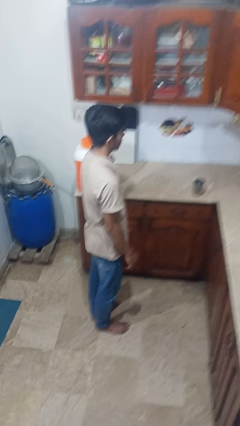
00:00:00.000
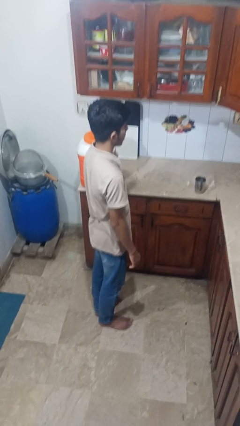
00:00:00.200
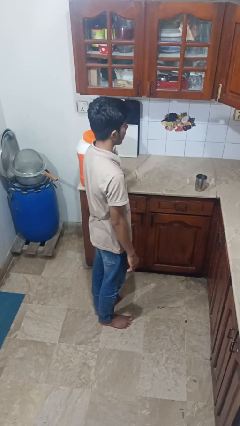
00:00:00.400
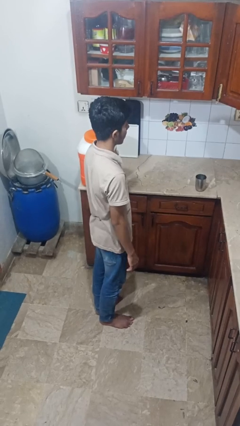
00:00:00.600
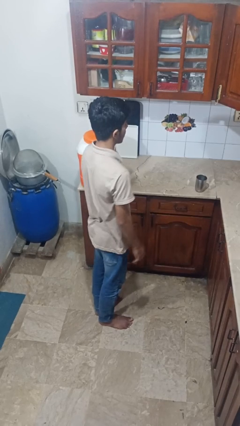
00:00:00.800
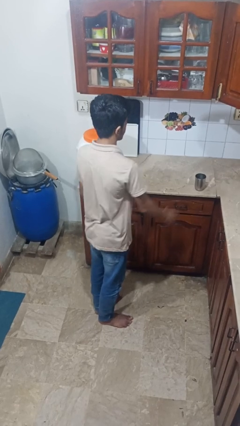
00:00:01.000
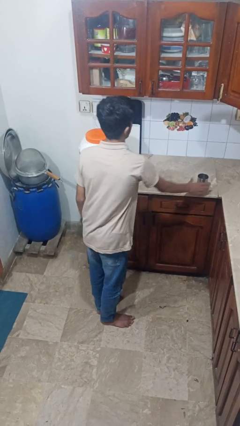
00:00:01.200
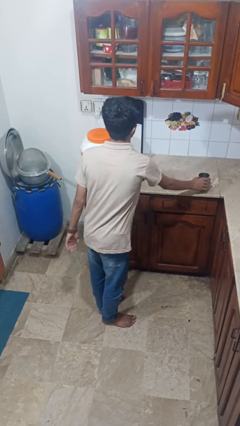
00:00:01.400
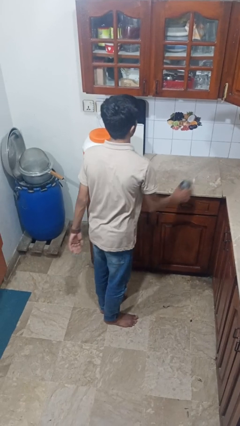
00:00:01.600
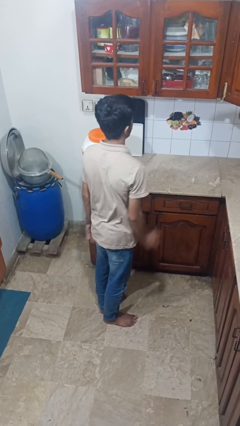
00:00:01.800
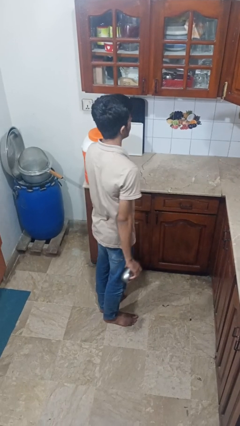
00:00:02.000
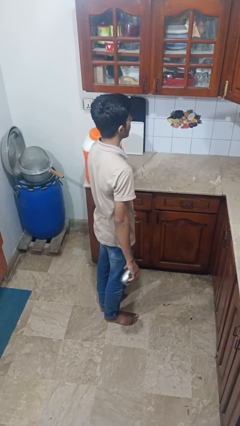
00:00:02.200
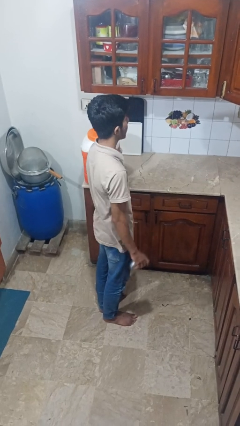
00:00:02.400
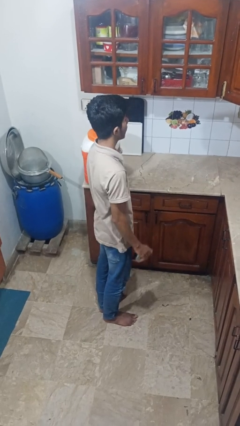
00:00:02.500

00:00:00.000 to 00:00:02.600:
person picks up object from countertop

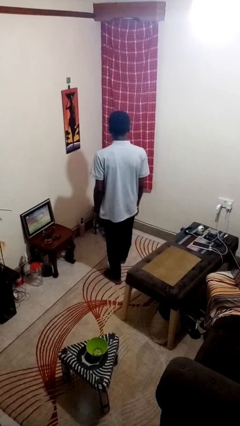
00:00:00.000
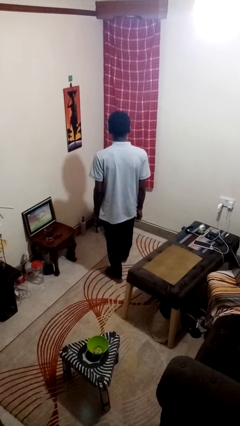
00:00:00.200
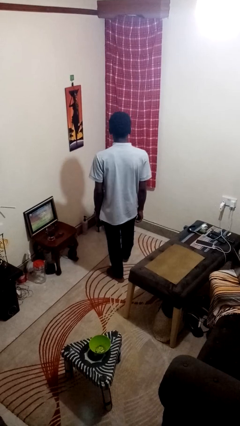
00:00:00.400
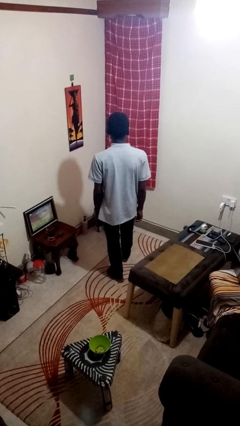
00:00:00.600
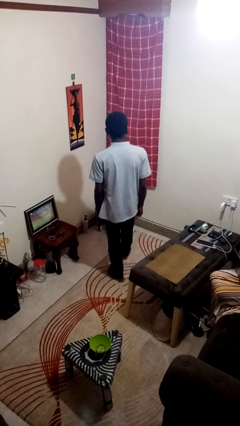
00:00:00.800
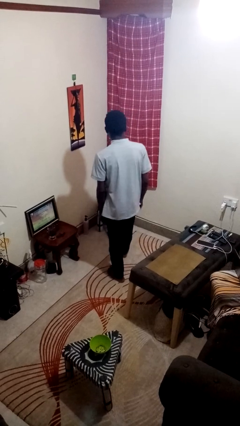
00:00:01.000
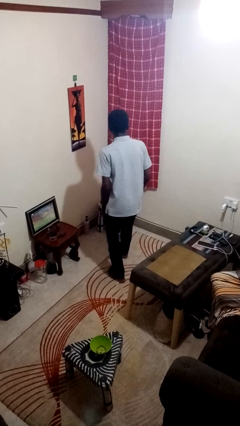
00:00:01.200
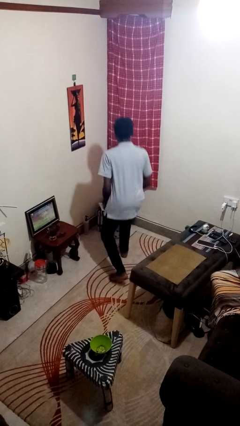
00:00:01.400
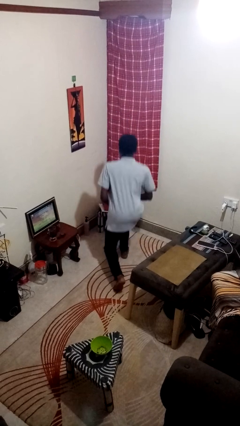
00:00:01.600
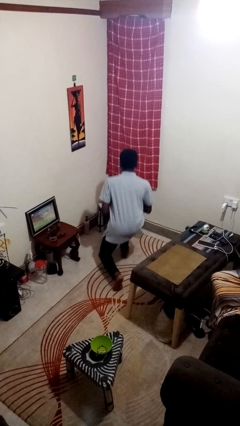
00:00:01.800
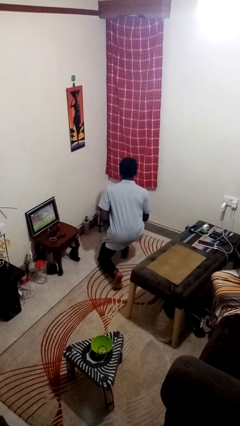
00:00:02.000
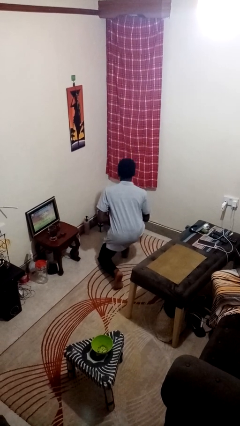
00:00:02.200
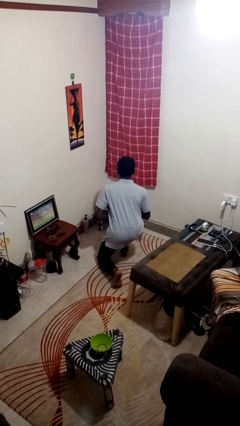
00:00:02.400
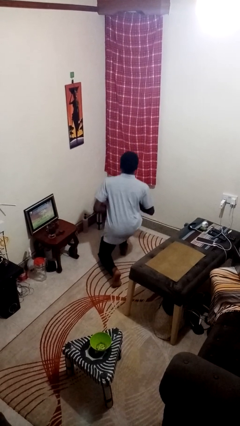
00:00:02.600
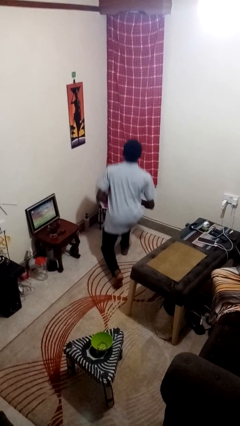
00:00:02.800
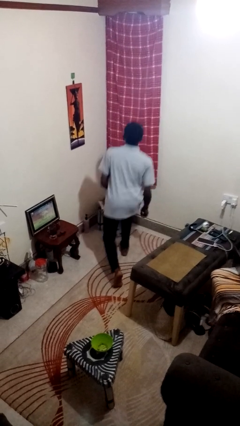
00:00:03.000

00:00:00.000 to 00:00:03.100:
person exercises with lunges

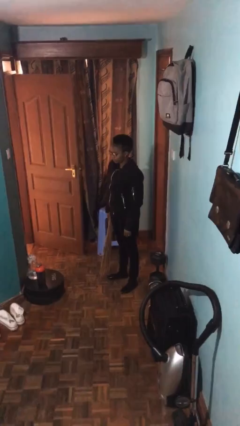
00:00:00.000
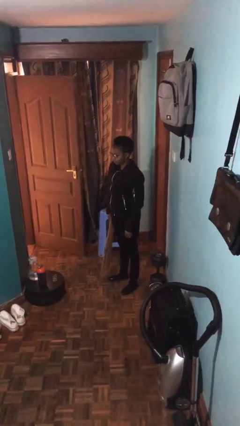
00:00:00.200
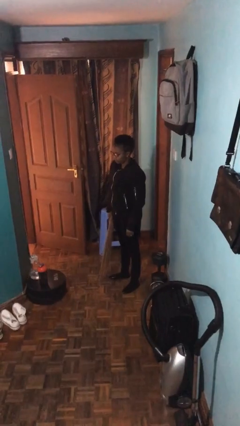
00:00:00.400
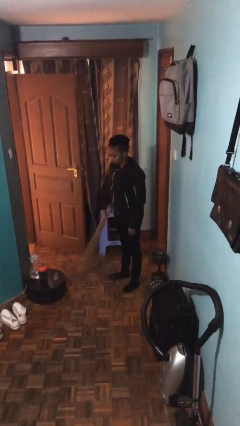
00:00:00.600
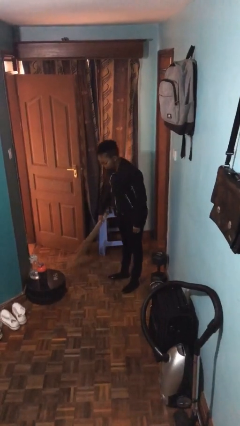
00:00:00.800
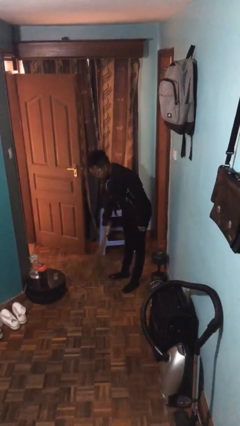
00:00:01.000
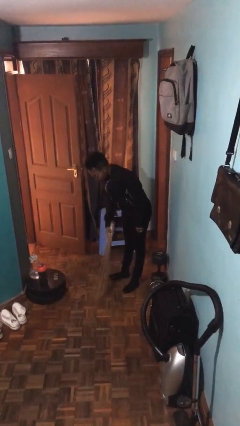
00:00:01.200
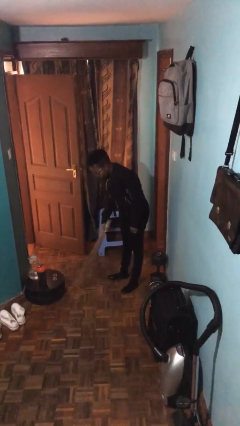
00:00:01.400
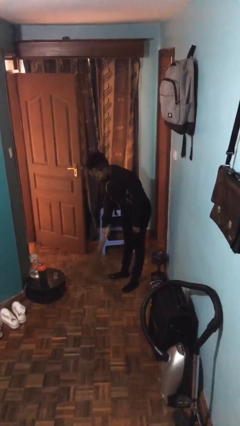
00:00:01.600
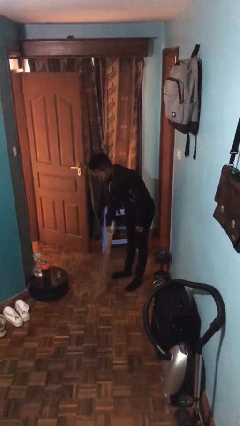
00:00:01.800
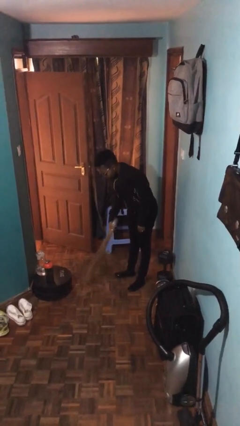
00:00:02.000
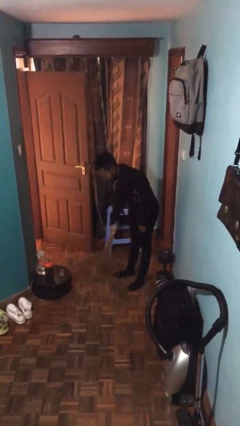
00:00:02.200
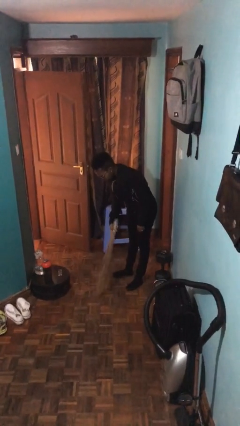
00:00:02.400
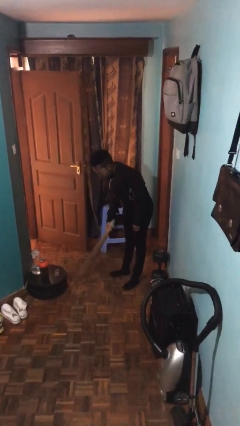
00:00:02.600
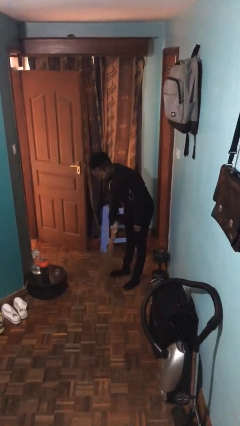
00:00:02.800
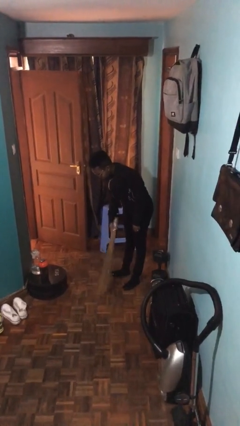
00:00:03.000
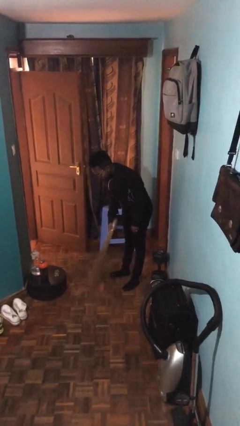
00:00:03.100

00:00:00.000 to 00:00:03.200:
person sweeps floor

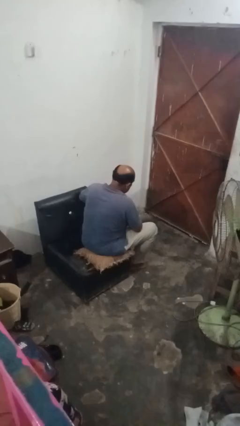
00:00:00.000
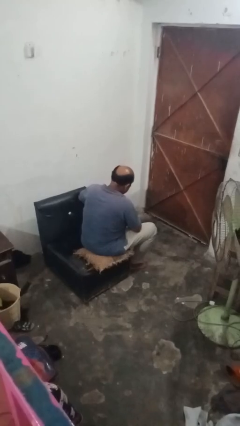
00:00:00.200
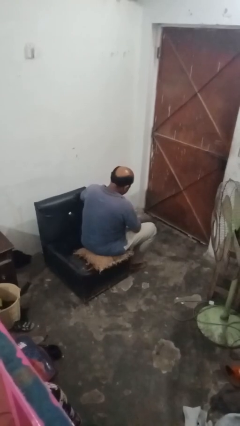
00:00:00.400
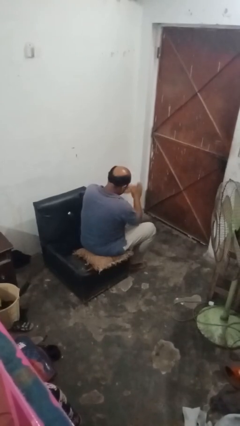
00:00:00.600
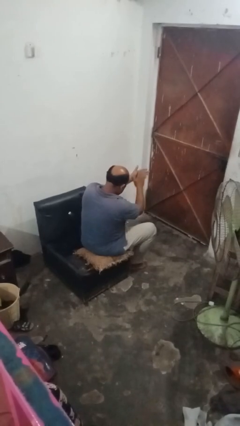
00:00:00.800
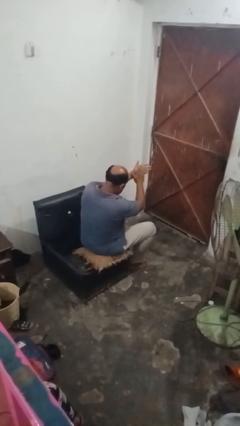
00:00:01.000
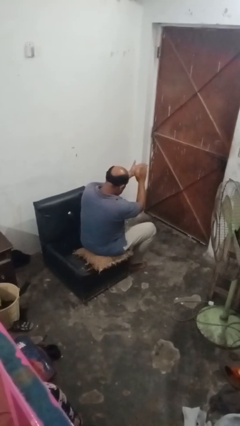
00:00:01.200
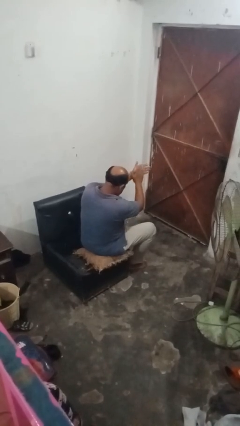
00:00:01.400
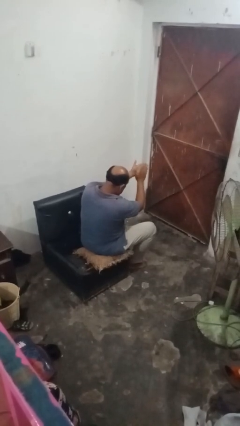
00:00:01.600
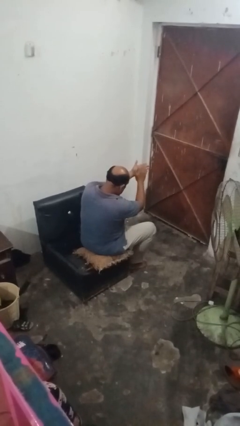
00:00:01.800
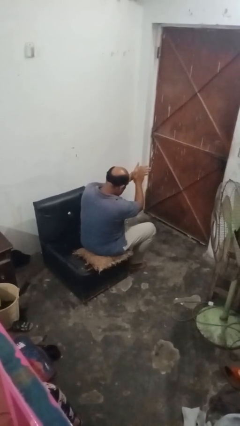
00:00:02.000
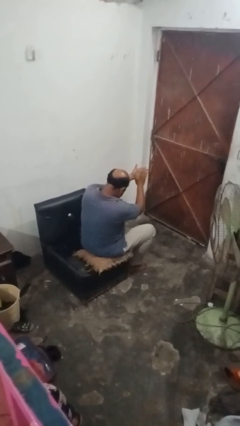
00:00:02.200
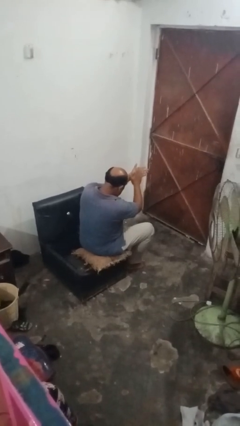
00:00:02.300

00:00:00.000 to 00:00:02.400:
person claps hands

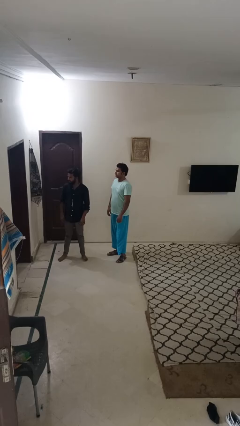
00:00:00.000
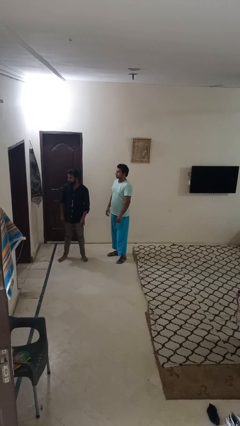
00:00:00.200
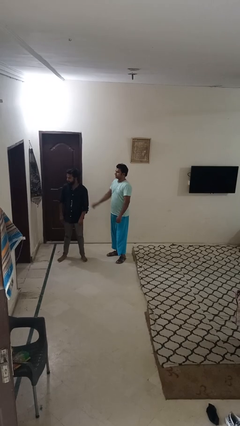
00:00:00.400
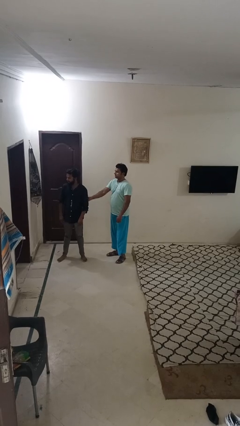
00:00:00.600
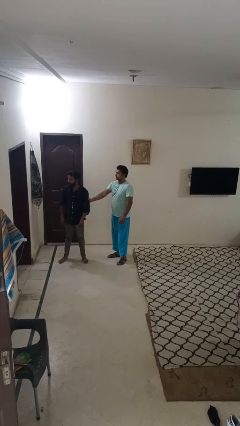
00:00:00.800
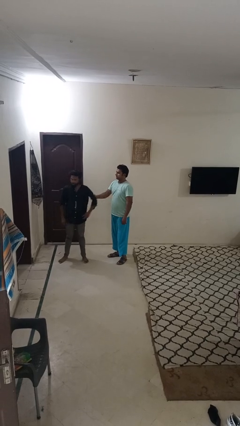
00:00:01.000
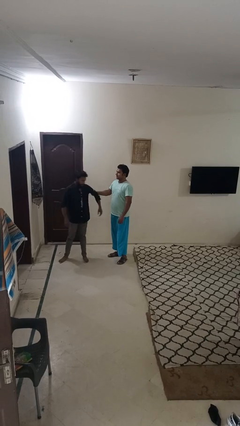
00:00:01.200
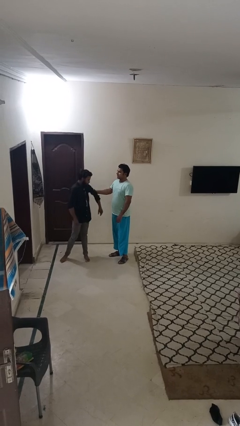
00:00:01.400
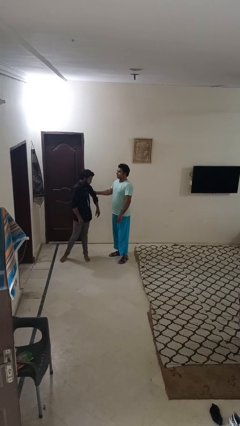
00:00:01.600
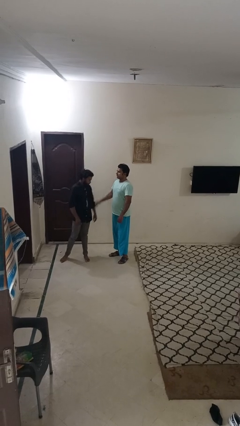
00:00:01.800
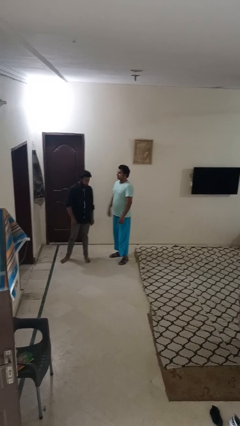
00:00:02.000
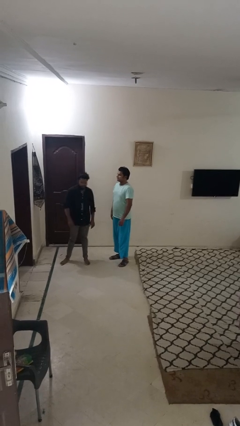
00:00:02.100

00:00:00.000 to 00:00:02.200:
person grabs person by bicep

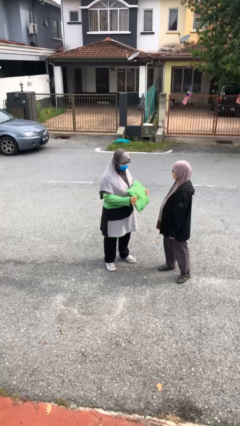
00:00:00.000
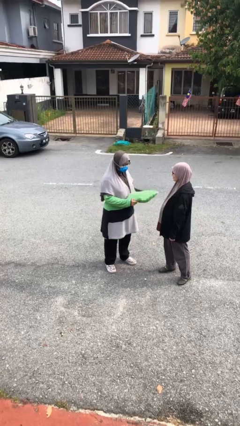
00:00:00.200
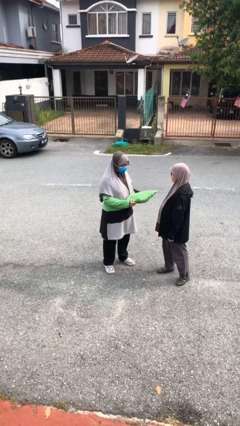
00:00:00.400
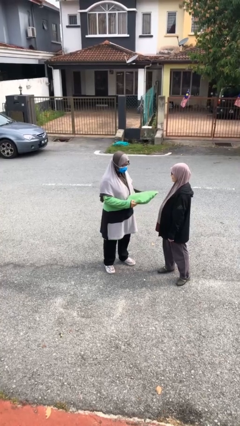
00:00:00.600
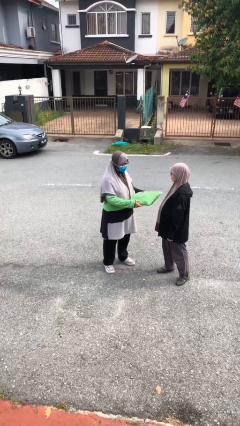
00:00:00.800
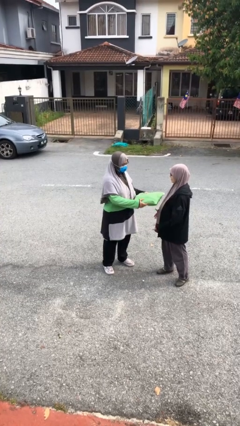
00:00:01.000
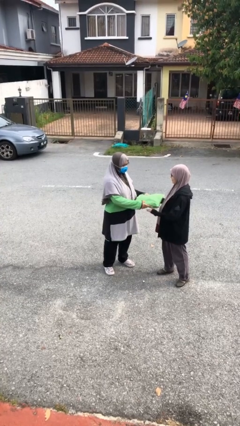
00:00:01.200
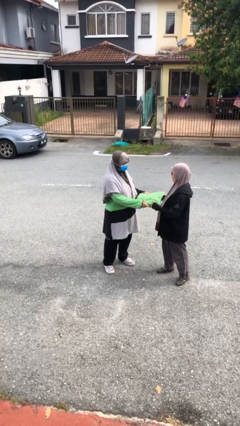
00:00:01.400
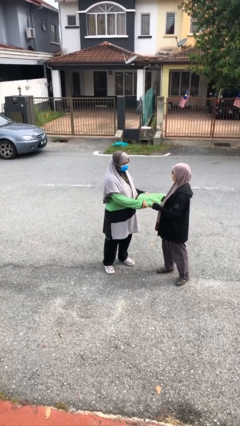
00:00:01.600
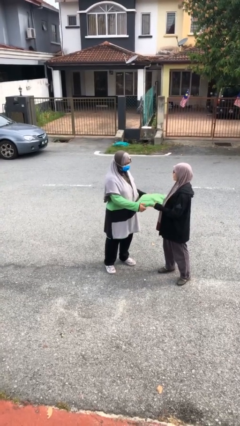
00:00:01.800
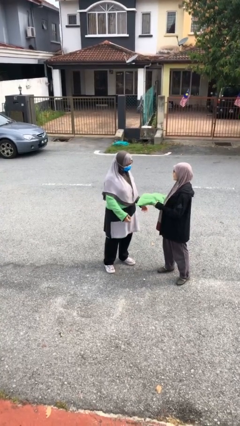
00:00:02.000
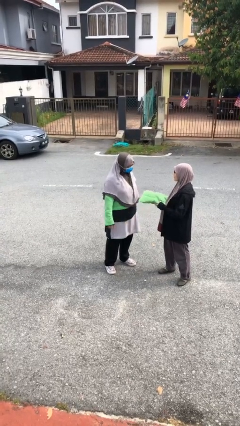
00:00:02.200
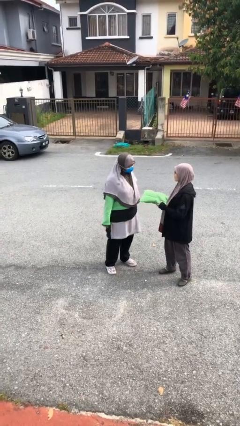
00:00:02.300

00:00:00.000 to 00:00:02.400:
person transfers object to person

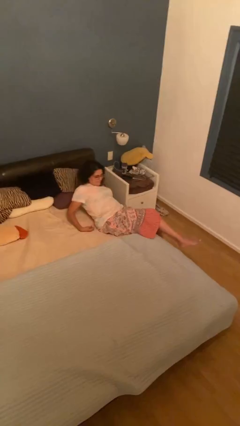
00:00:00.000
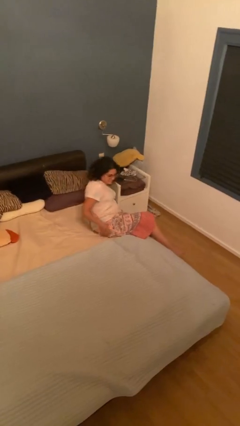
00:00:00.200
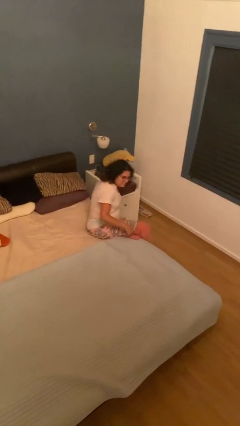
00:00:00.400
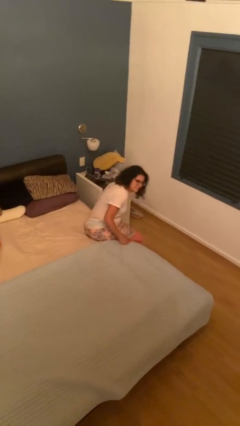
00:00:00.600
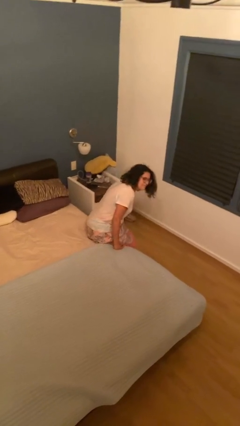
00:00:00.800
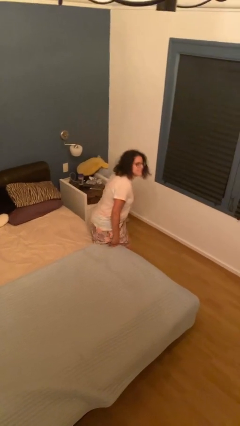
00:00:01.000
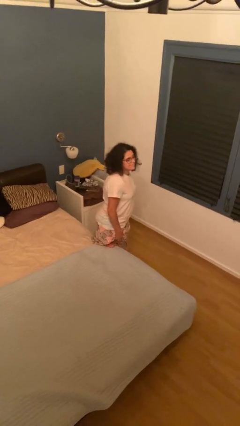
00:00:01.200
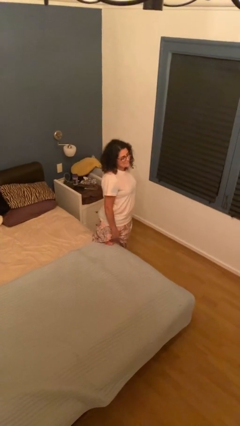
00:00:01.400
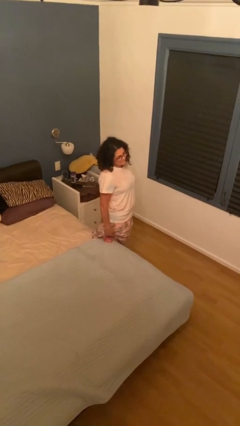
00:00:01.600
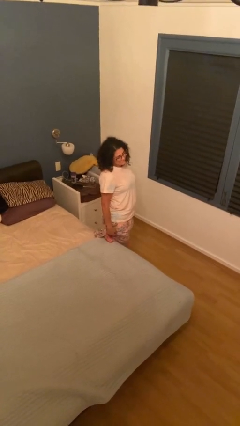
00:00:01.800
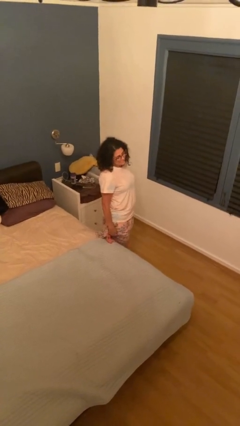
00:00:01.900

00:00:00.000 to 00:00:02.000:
person stands up
